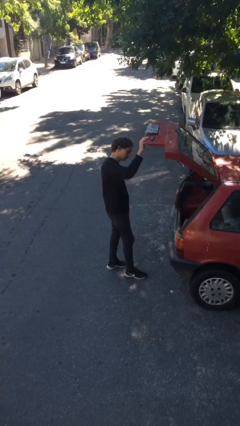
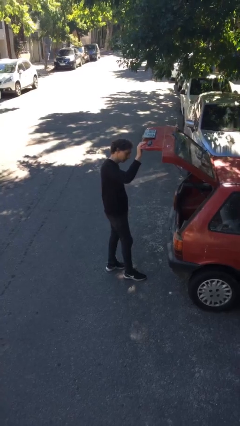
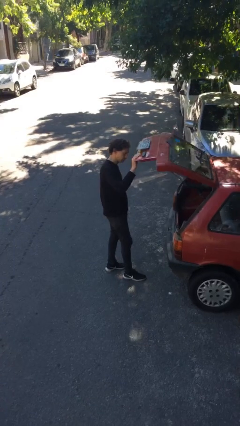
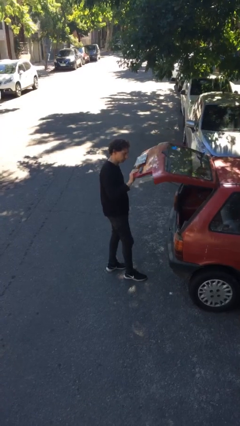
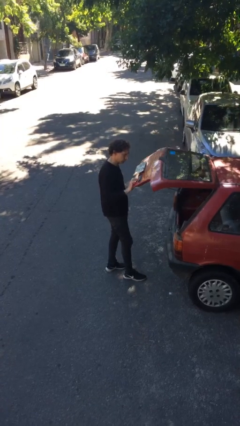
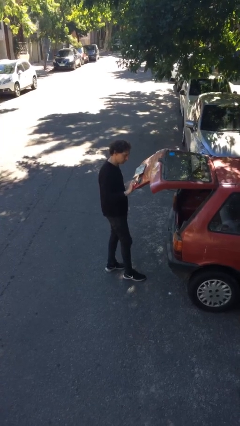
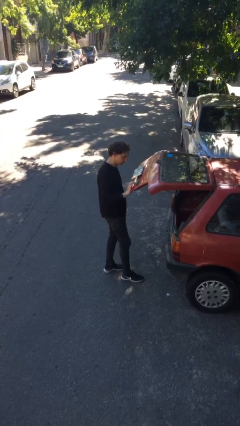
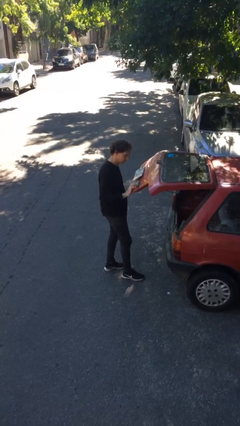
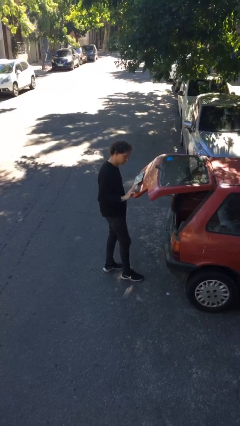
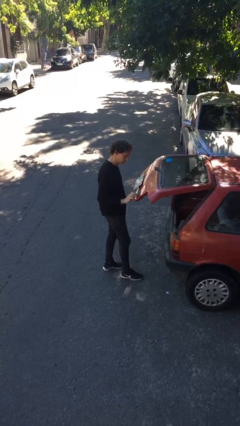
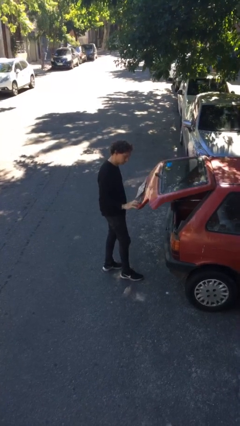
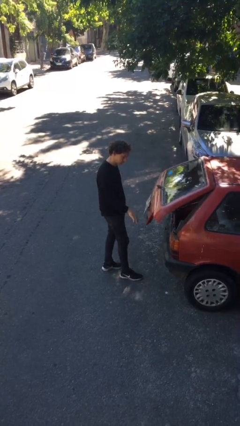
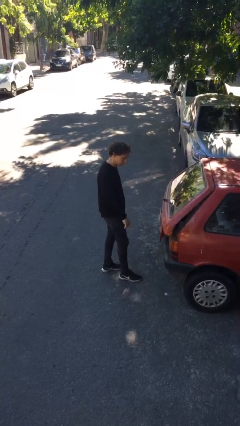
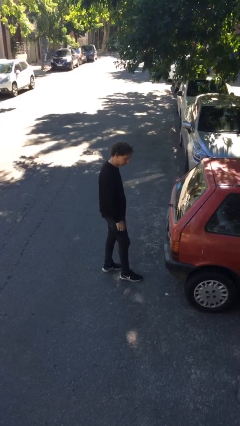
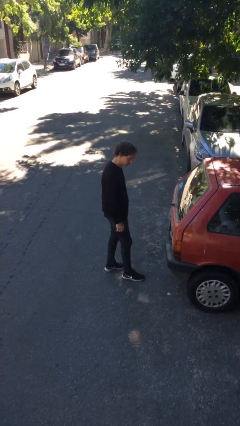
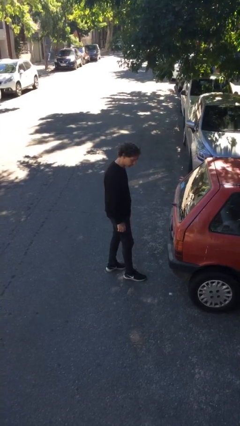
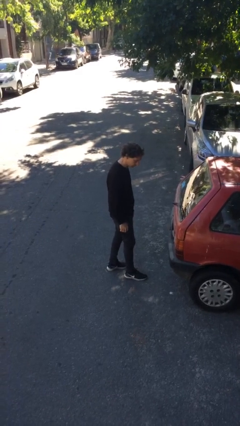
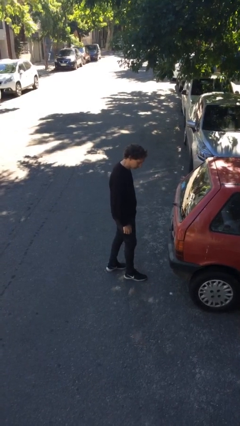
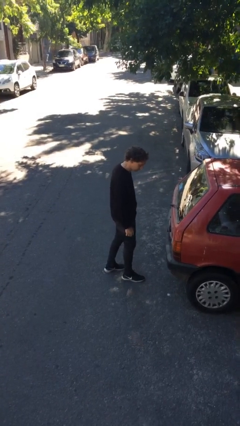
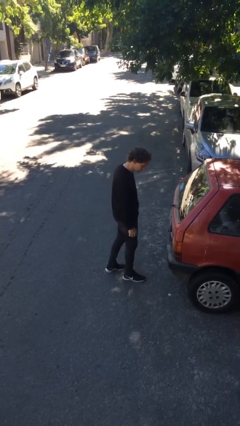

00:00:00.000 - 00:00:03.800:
person closes car trunk

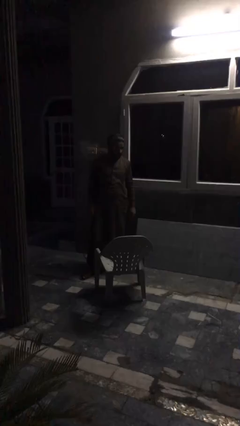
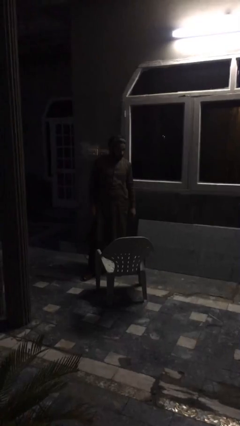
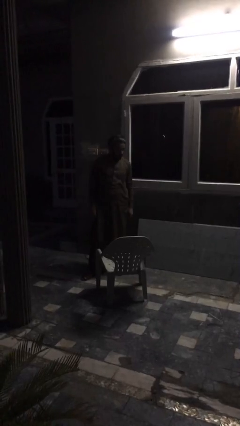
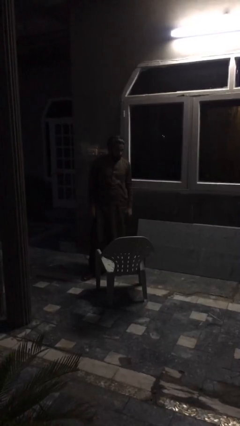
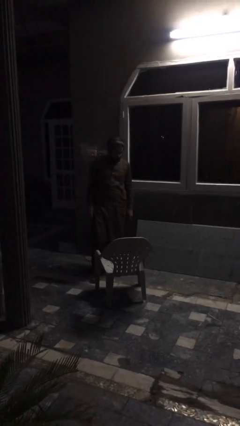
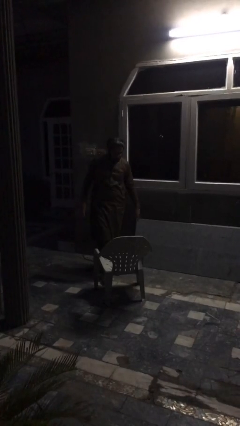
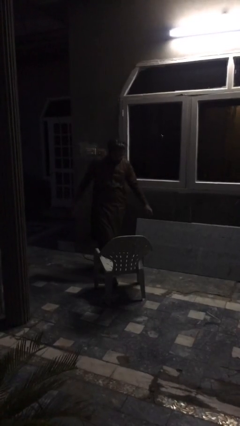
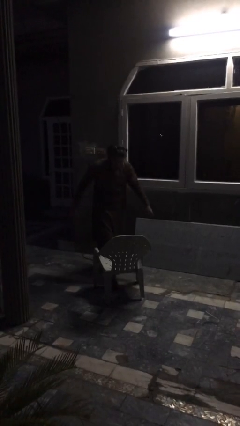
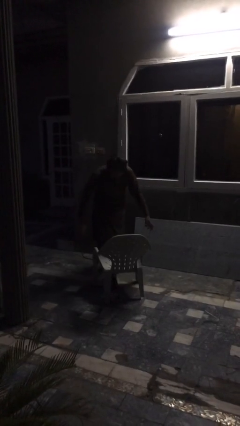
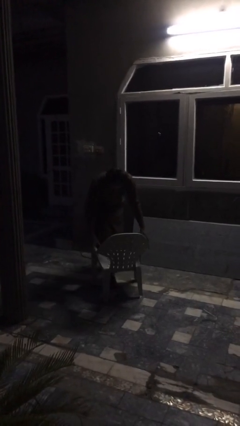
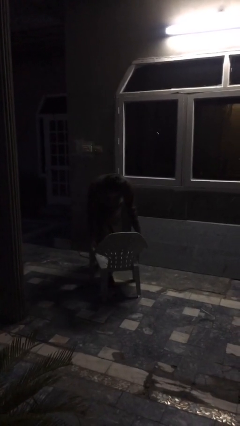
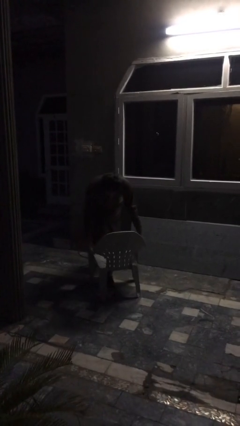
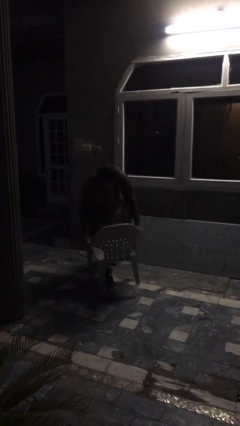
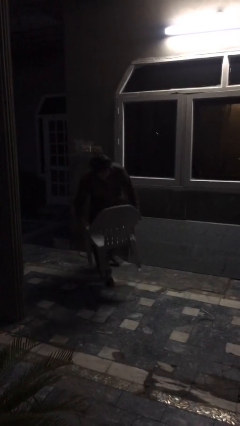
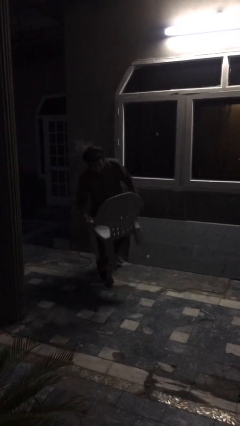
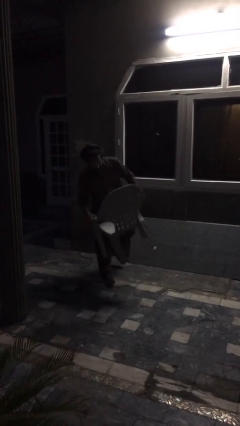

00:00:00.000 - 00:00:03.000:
person picks up object from floor

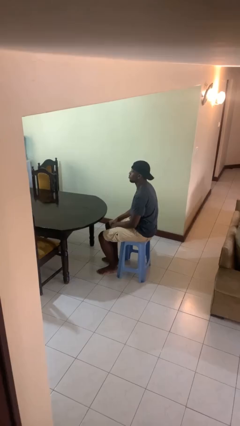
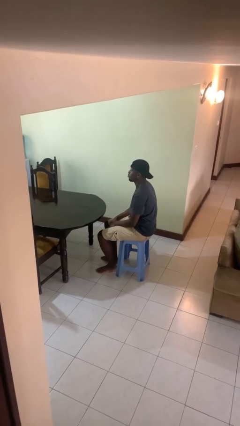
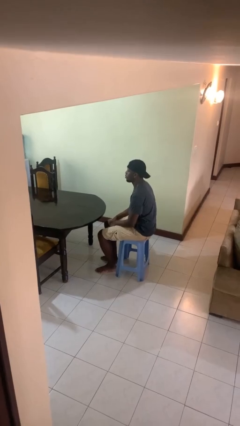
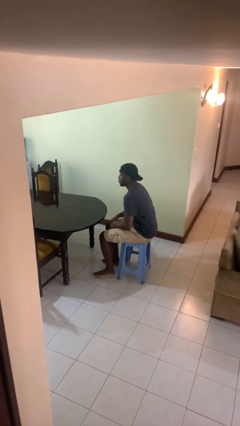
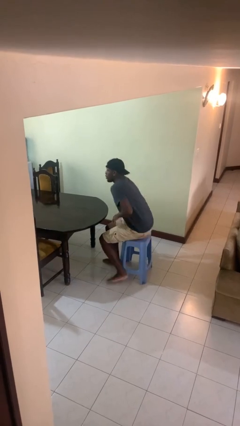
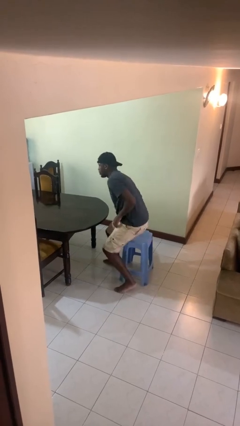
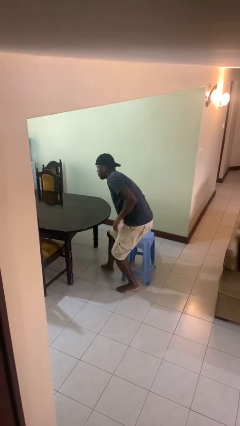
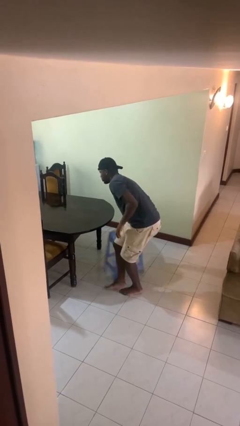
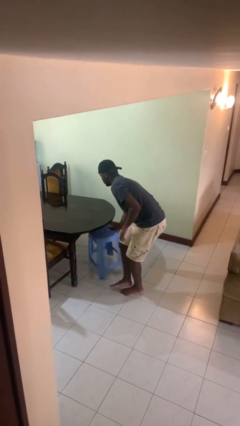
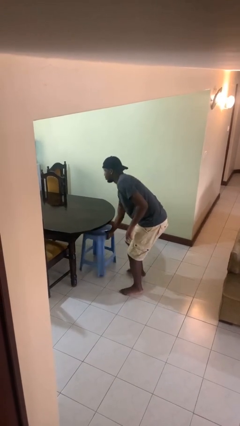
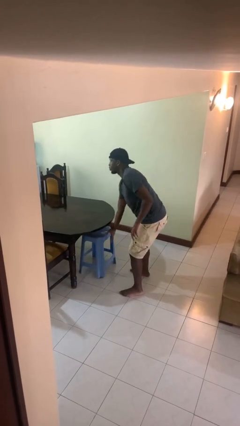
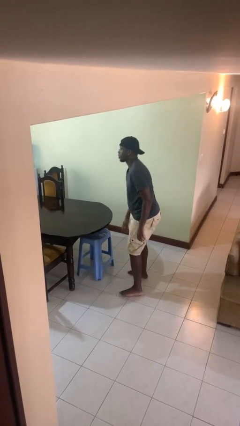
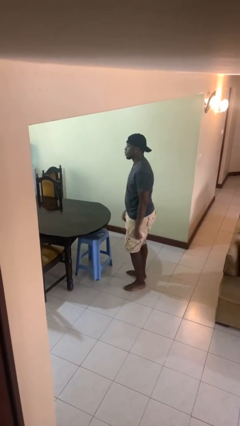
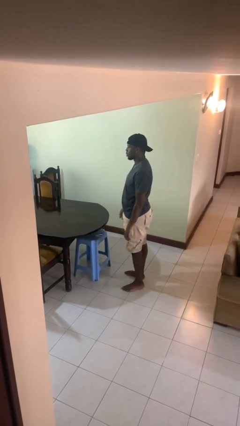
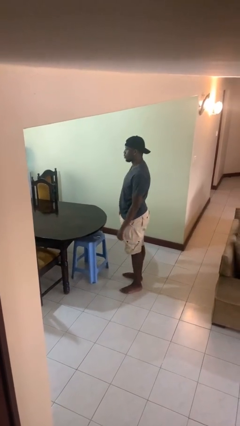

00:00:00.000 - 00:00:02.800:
person stands up

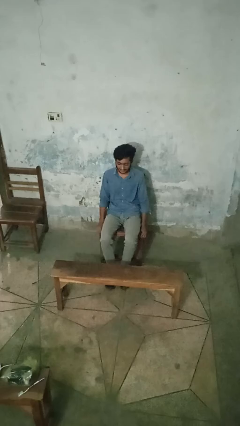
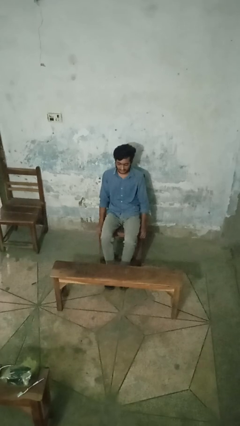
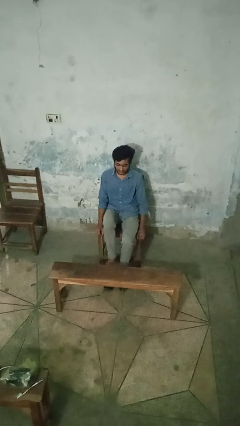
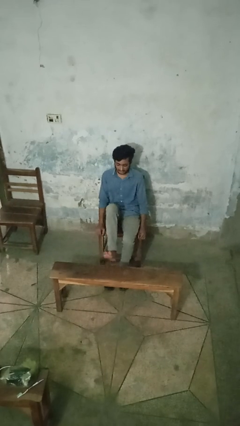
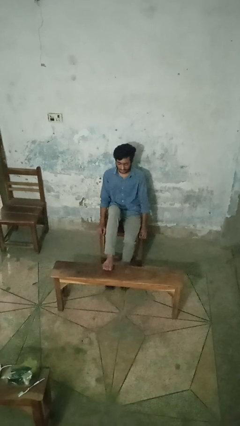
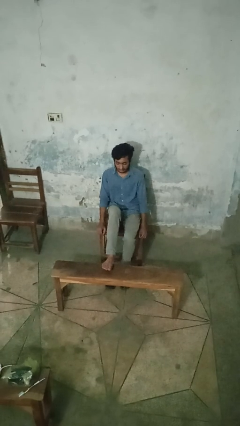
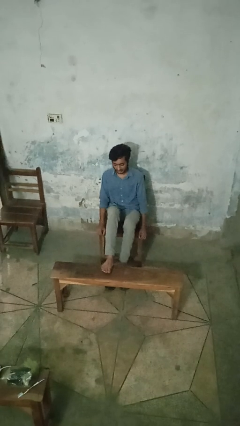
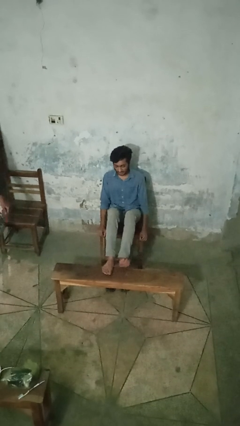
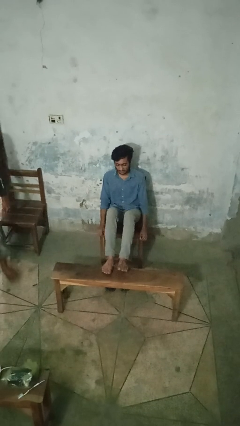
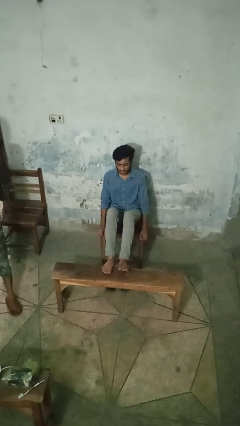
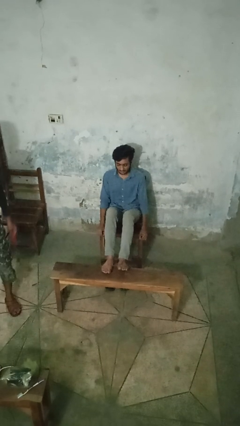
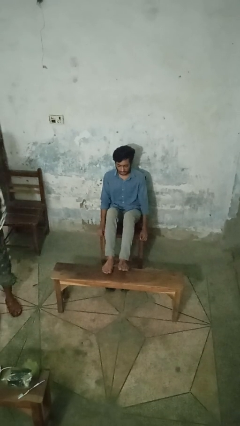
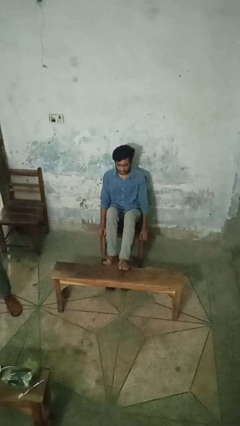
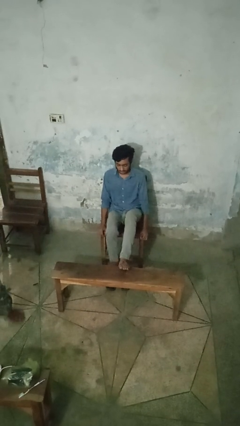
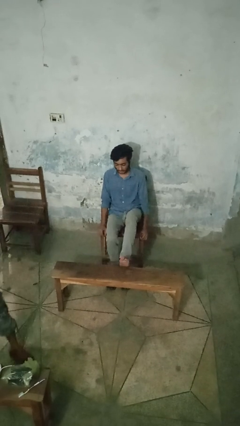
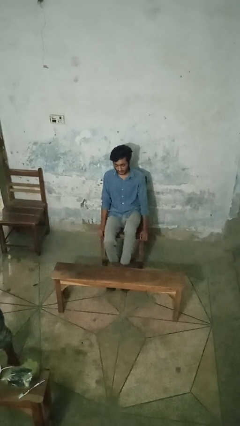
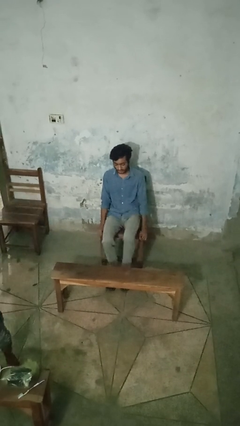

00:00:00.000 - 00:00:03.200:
person puts feet up

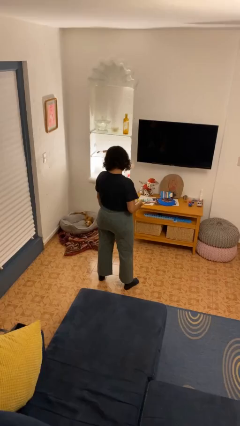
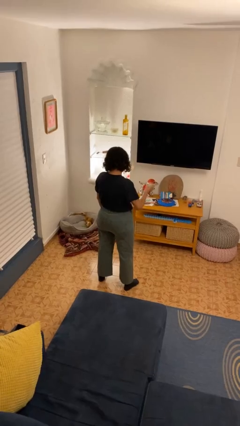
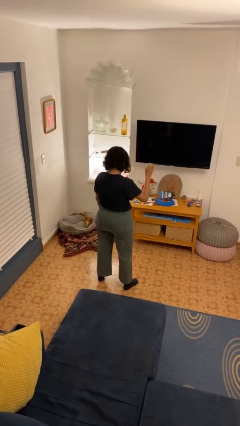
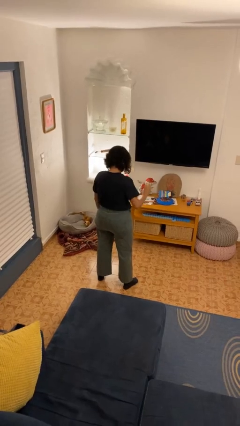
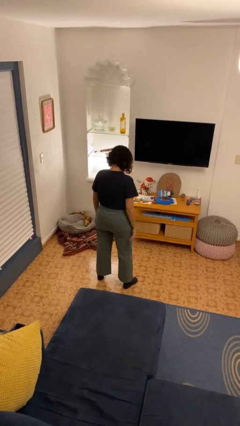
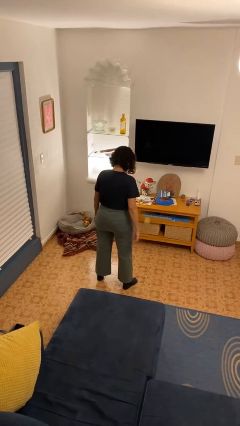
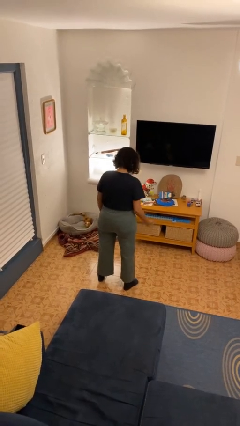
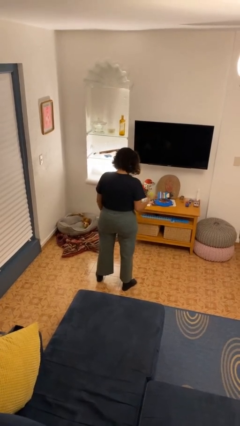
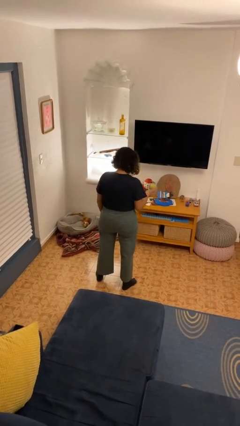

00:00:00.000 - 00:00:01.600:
person bounces ball on floor

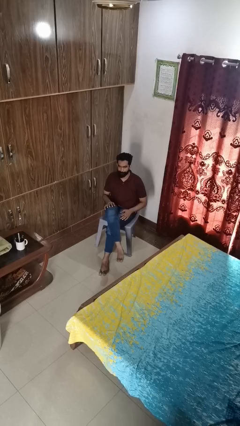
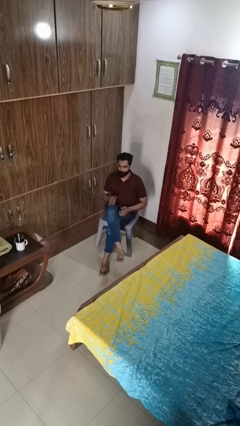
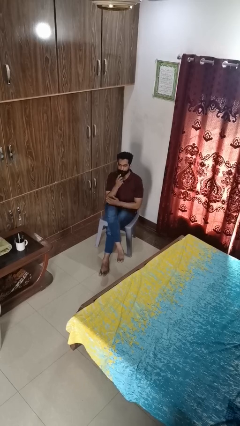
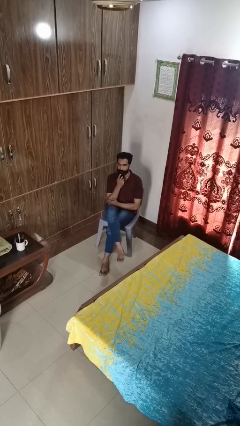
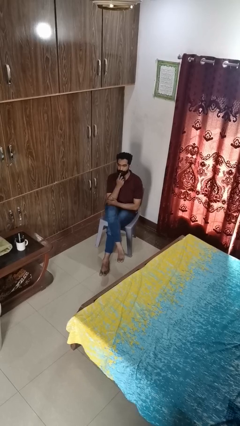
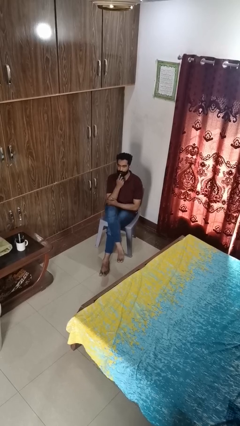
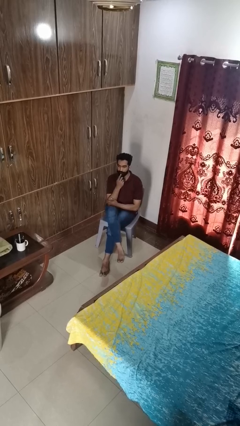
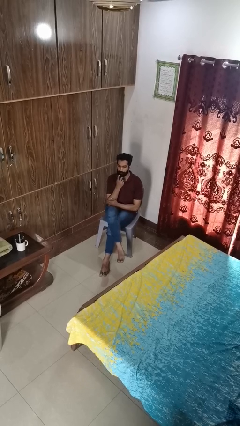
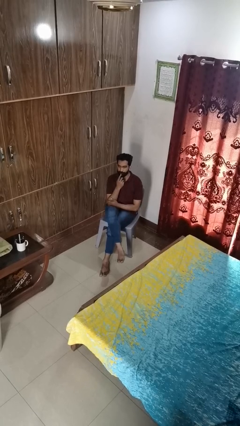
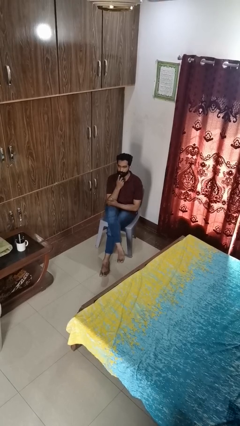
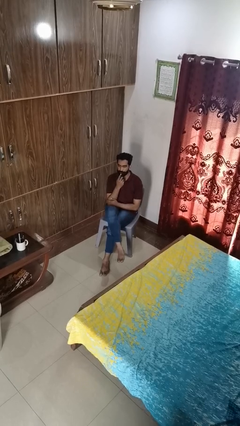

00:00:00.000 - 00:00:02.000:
person strokes chin

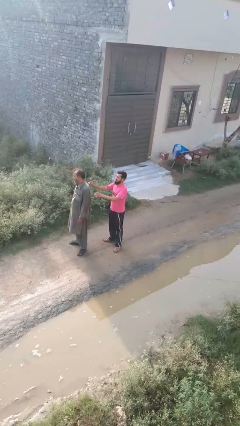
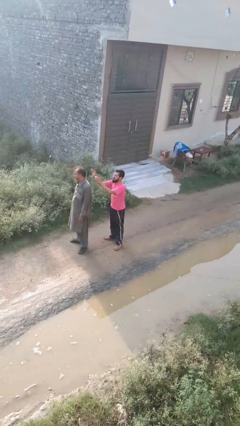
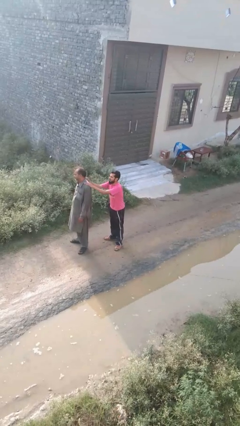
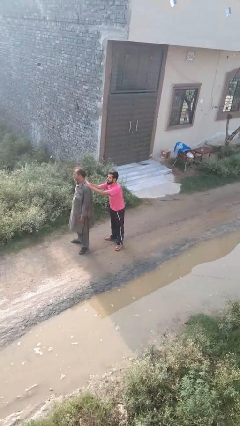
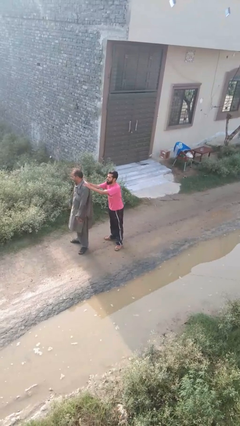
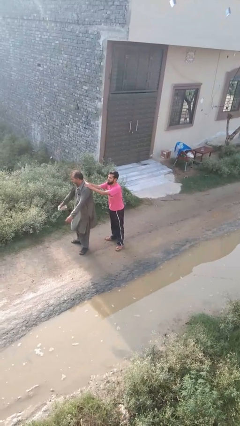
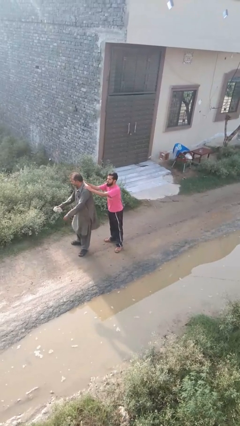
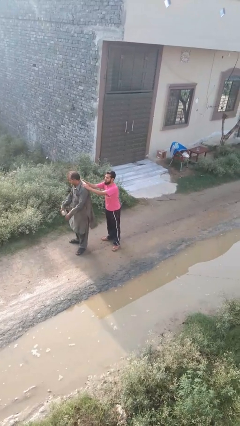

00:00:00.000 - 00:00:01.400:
person grabs person by shoulder
